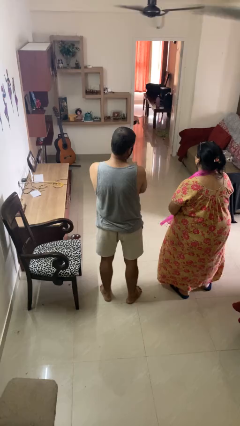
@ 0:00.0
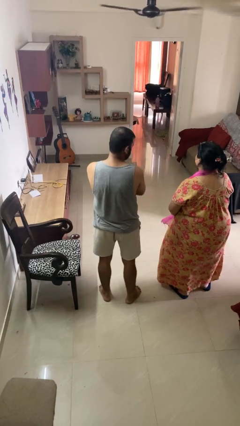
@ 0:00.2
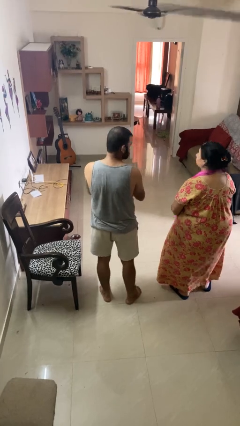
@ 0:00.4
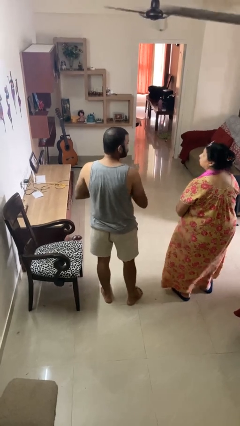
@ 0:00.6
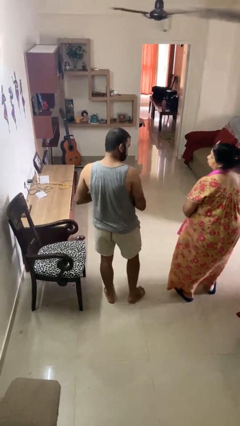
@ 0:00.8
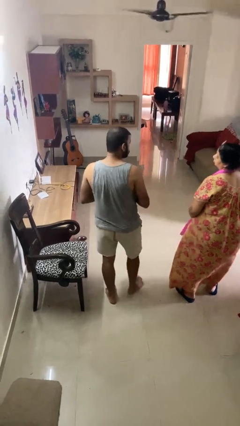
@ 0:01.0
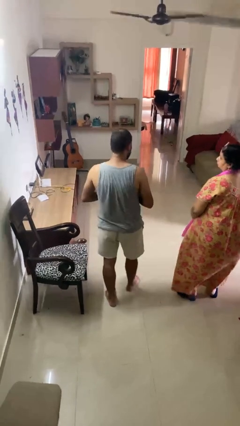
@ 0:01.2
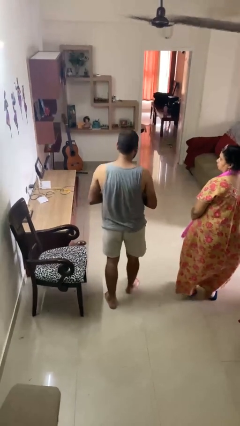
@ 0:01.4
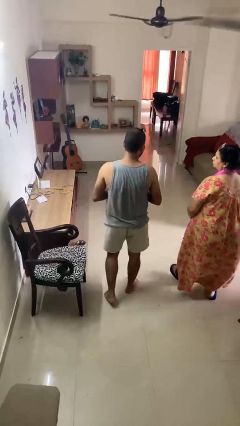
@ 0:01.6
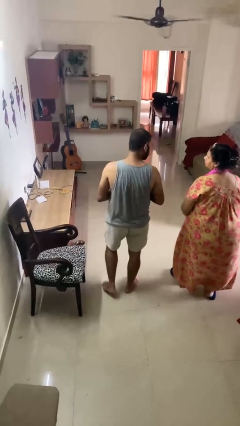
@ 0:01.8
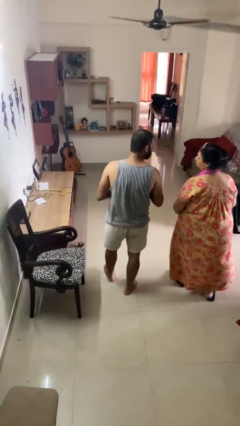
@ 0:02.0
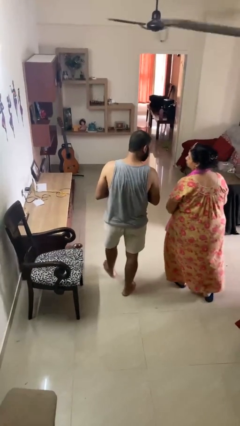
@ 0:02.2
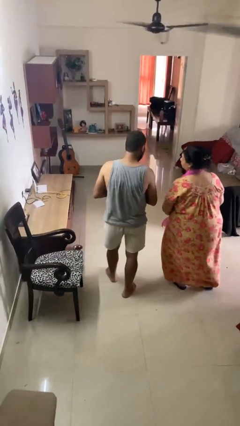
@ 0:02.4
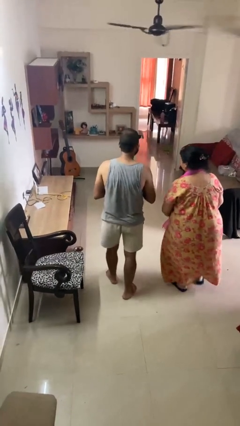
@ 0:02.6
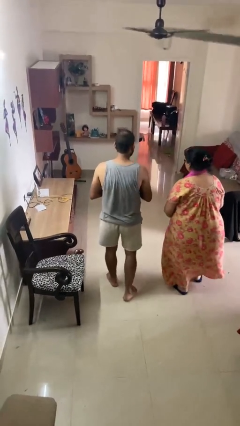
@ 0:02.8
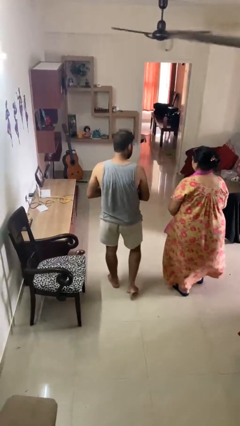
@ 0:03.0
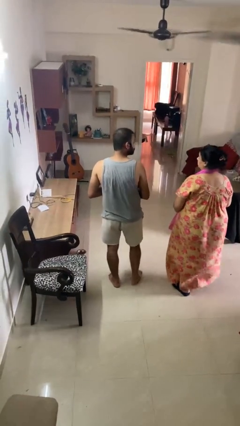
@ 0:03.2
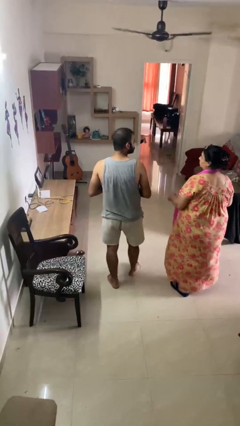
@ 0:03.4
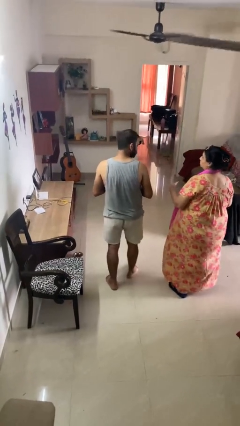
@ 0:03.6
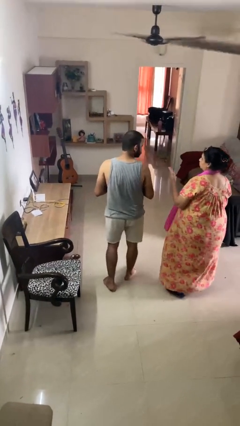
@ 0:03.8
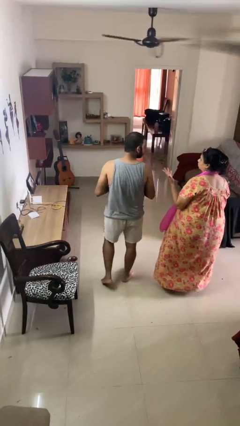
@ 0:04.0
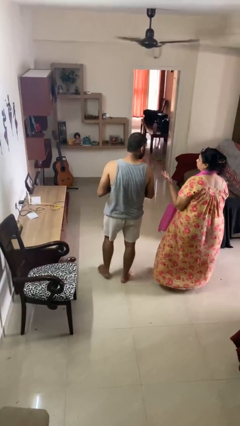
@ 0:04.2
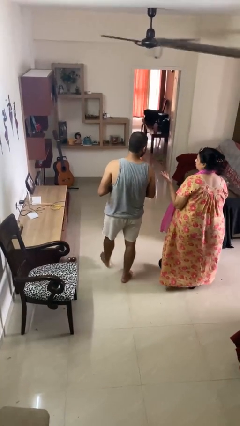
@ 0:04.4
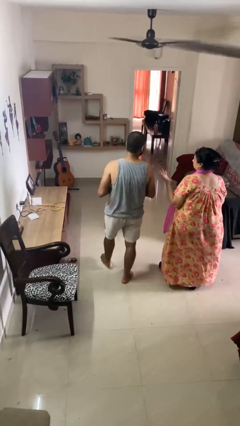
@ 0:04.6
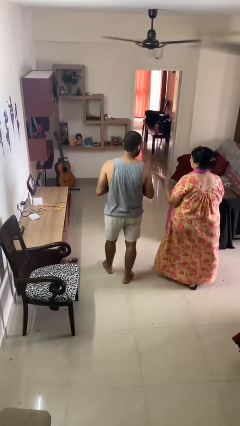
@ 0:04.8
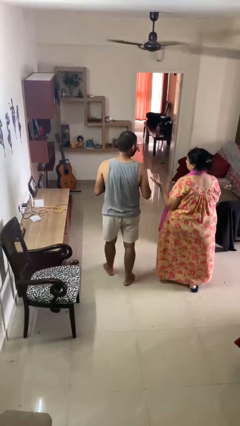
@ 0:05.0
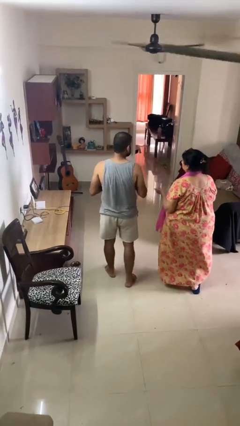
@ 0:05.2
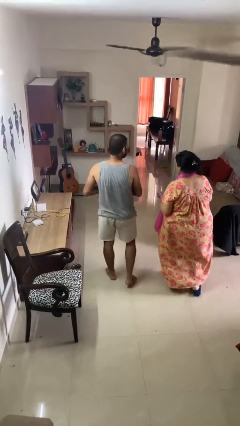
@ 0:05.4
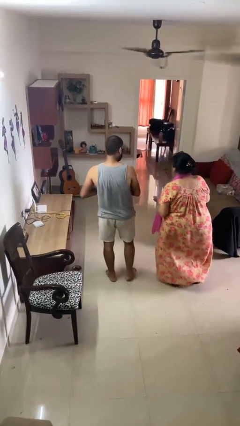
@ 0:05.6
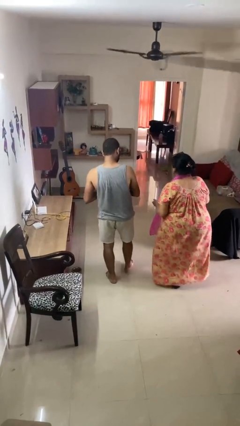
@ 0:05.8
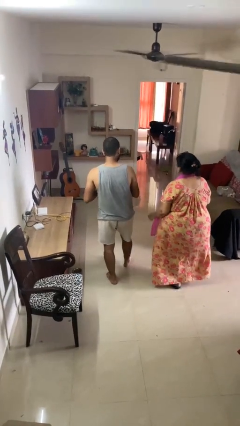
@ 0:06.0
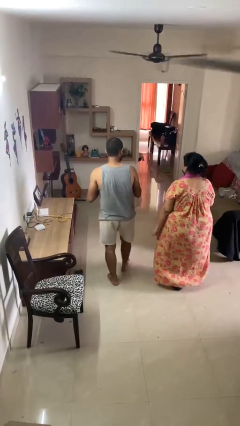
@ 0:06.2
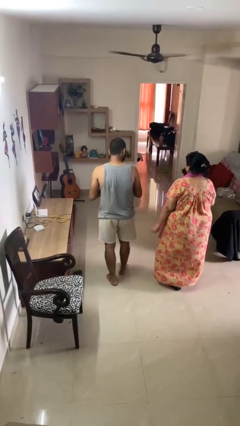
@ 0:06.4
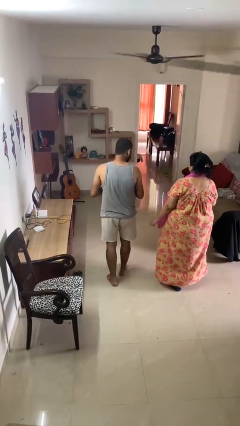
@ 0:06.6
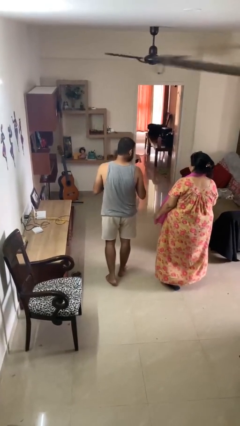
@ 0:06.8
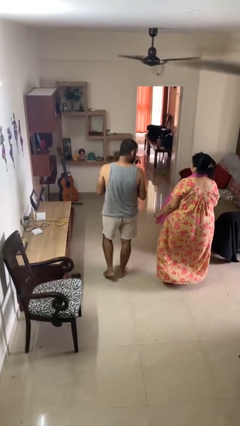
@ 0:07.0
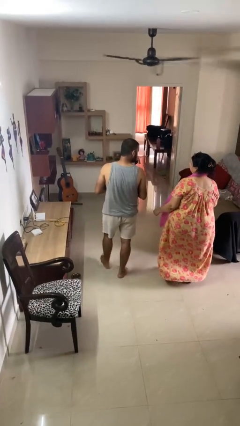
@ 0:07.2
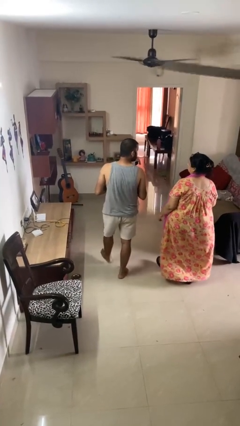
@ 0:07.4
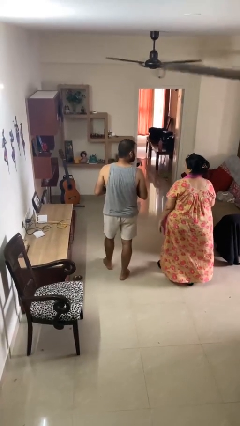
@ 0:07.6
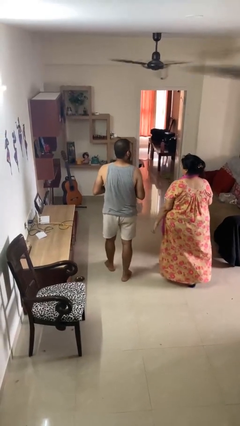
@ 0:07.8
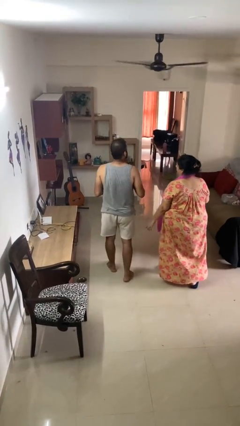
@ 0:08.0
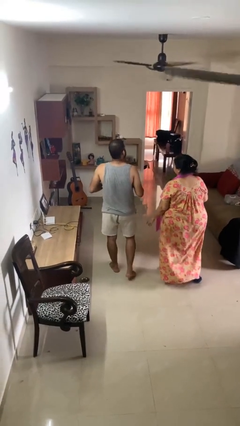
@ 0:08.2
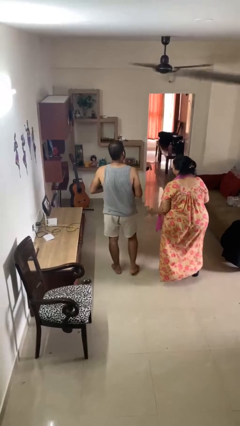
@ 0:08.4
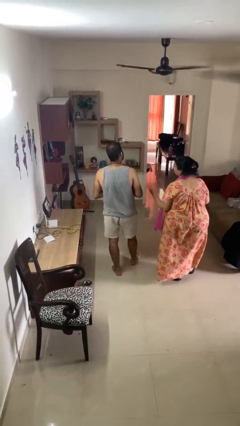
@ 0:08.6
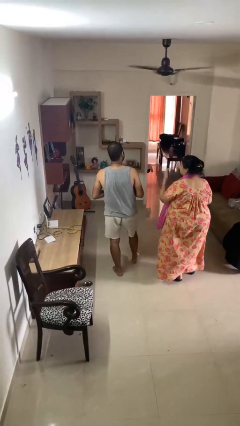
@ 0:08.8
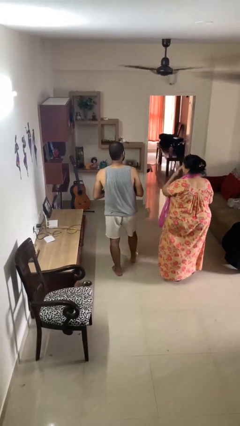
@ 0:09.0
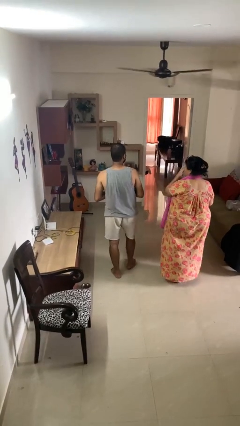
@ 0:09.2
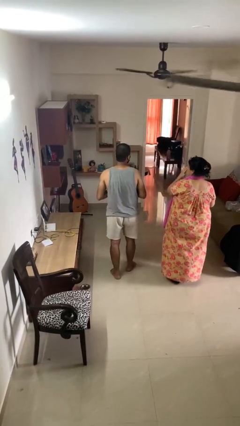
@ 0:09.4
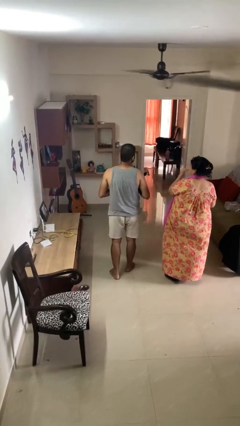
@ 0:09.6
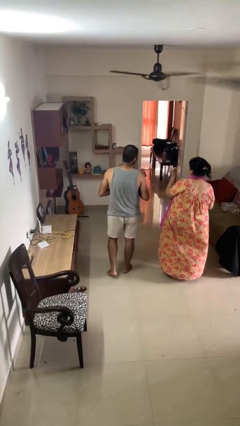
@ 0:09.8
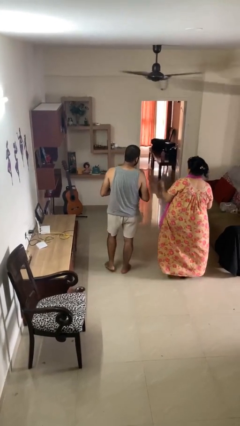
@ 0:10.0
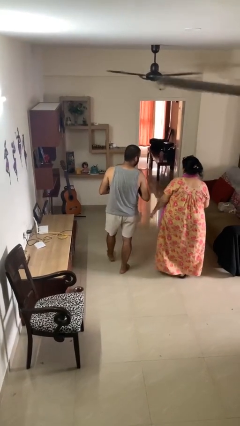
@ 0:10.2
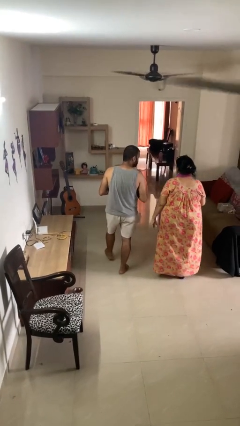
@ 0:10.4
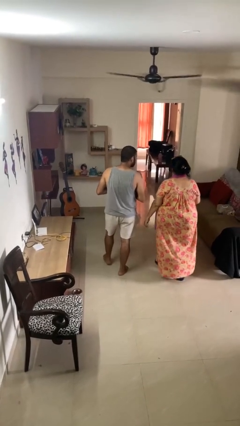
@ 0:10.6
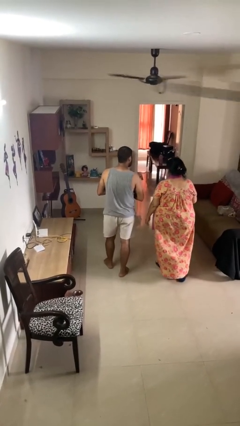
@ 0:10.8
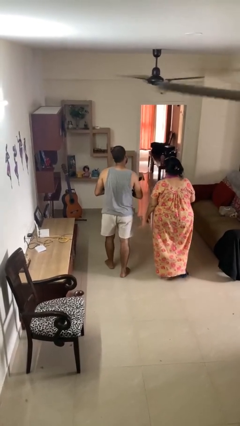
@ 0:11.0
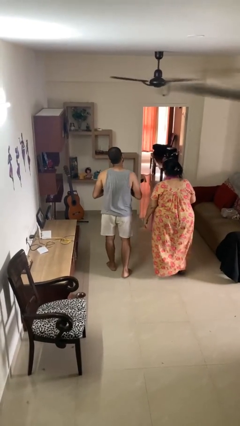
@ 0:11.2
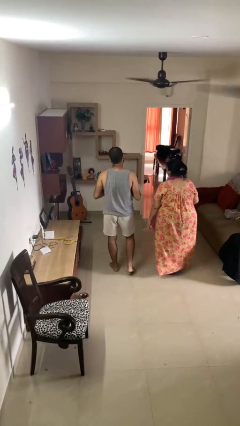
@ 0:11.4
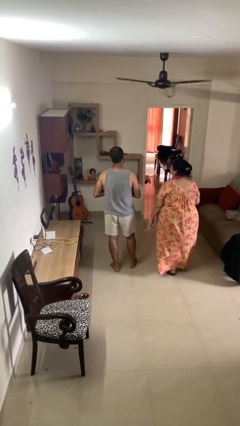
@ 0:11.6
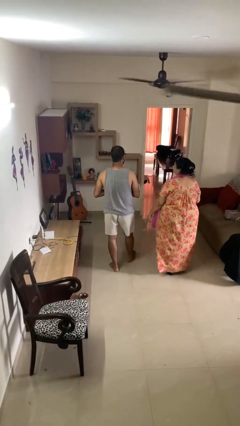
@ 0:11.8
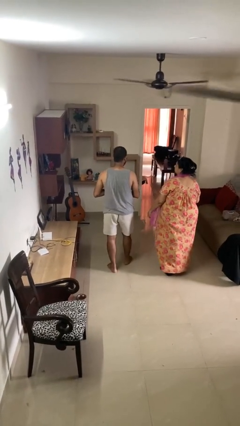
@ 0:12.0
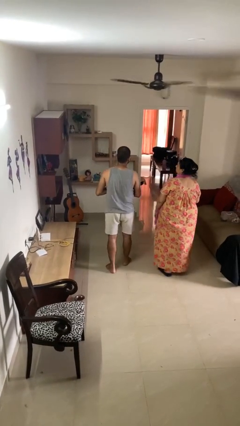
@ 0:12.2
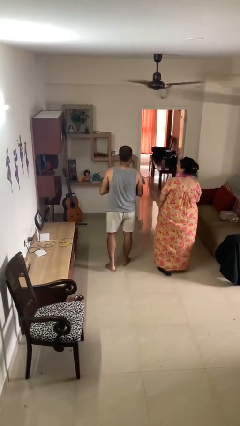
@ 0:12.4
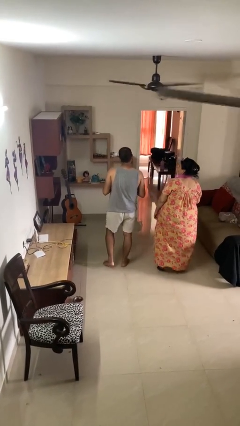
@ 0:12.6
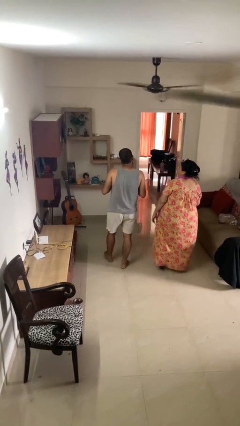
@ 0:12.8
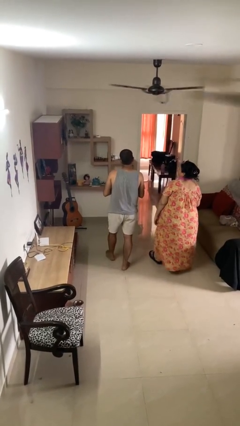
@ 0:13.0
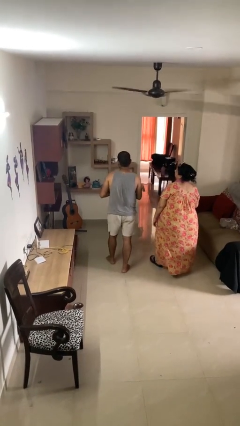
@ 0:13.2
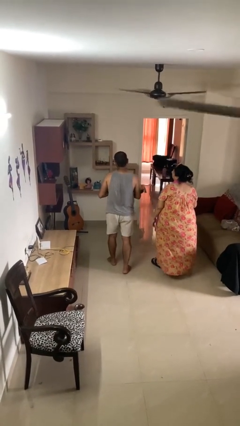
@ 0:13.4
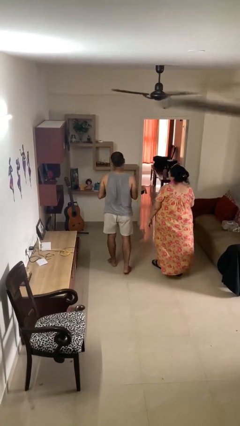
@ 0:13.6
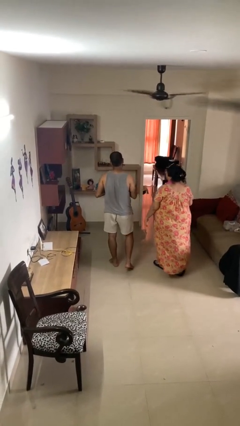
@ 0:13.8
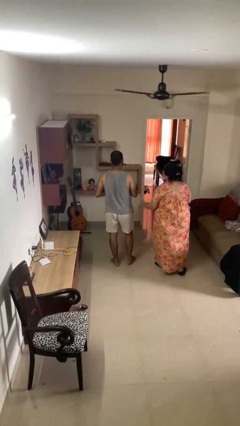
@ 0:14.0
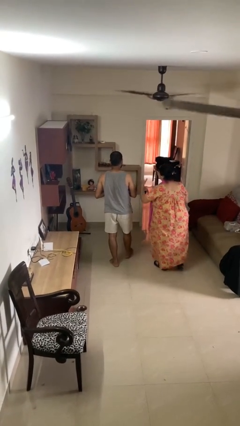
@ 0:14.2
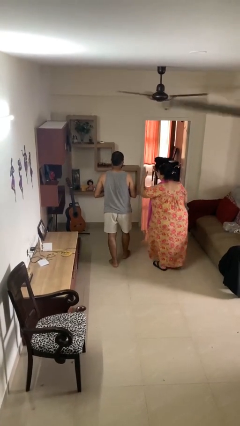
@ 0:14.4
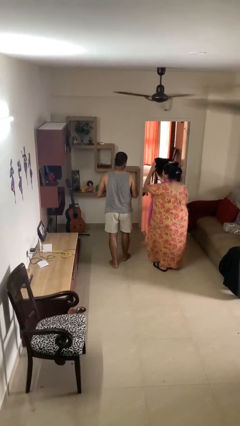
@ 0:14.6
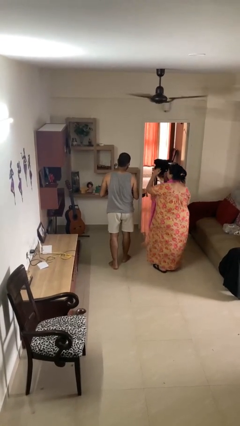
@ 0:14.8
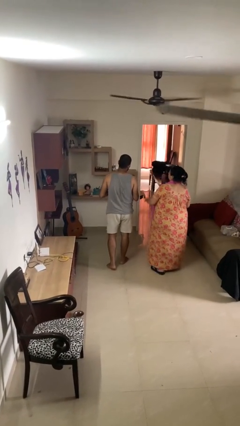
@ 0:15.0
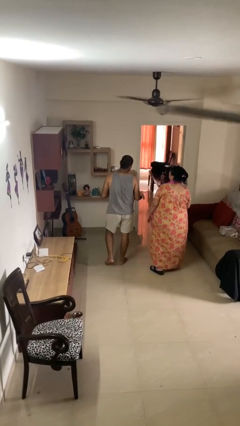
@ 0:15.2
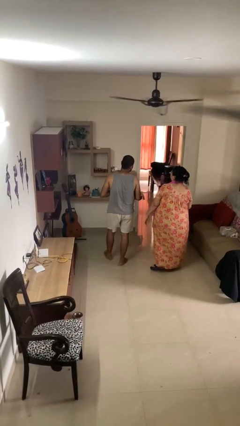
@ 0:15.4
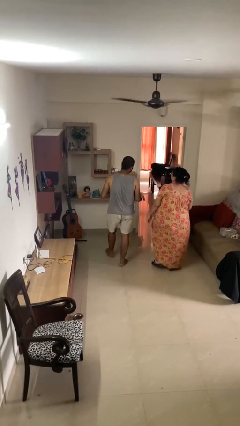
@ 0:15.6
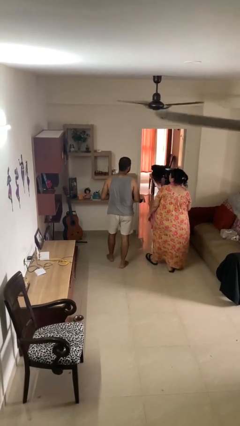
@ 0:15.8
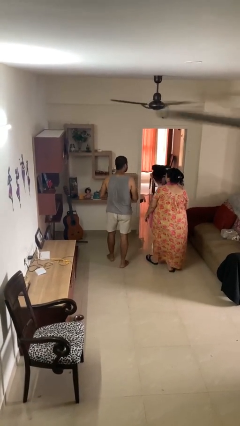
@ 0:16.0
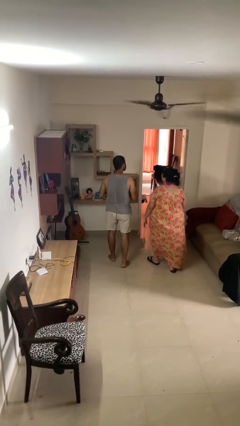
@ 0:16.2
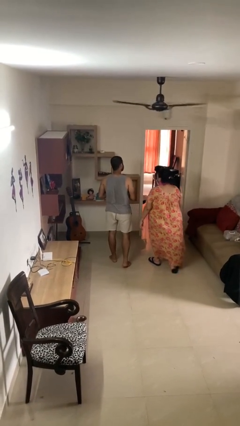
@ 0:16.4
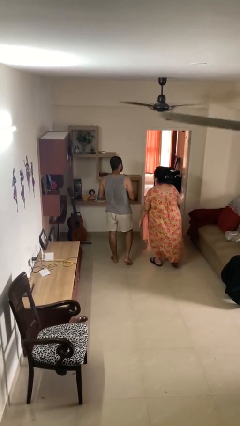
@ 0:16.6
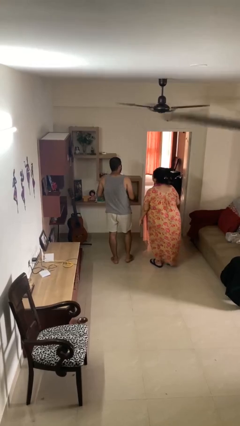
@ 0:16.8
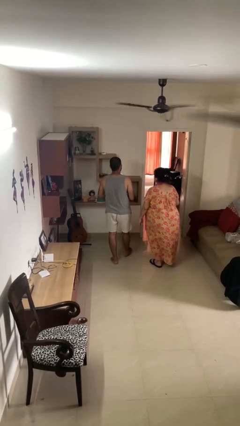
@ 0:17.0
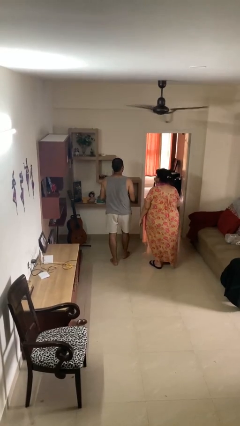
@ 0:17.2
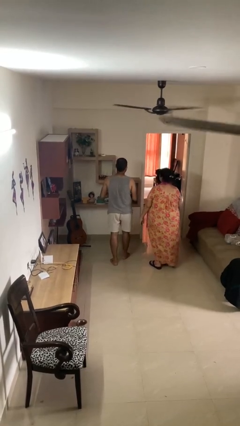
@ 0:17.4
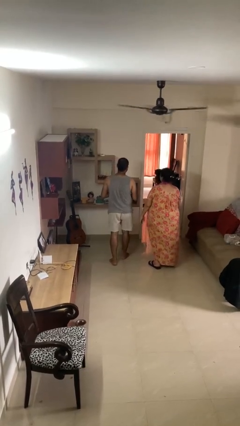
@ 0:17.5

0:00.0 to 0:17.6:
person talks to person

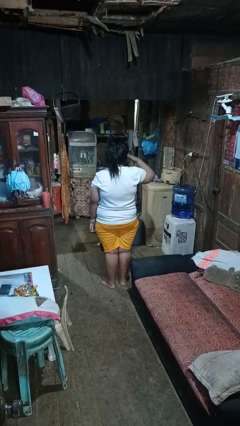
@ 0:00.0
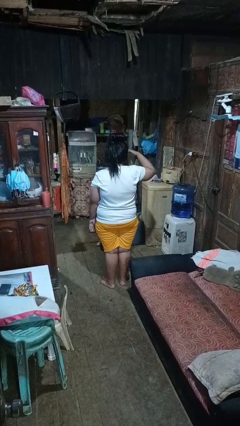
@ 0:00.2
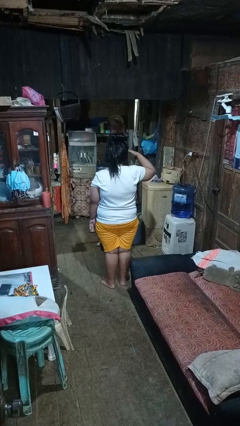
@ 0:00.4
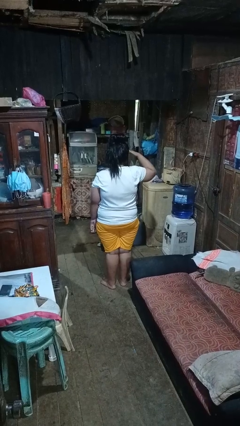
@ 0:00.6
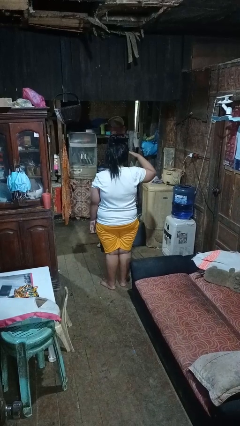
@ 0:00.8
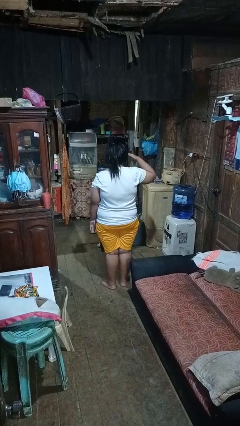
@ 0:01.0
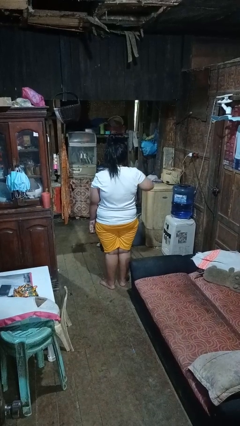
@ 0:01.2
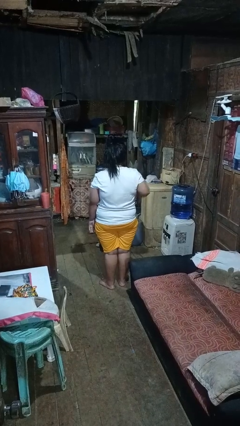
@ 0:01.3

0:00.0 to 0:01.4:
person salutes
